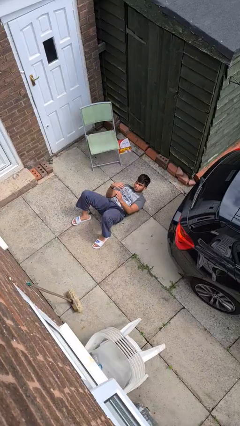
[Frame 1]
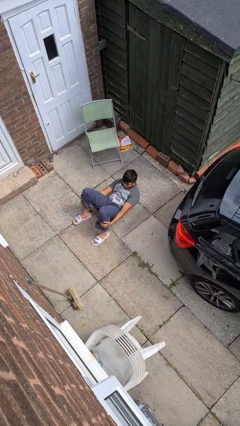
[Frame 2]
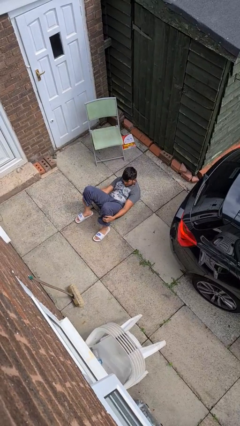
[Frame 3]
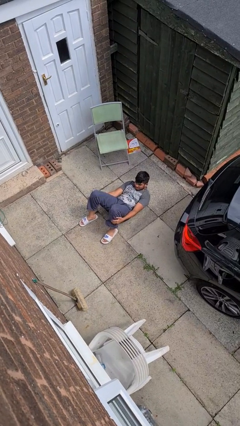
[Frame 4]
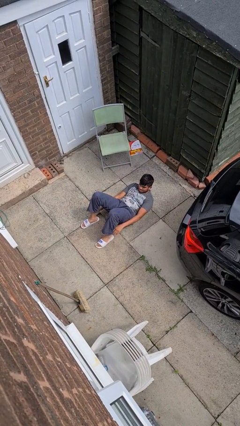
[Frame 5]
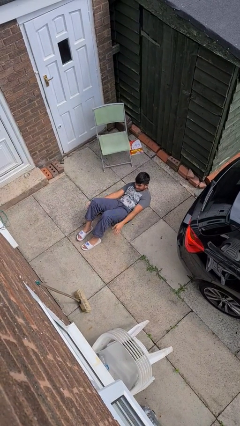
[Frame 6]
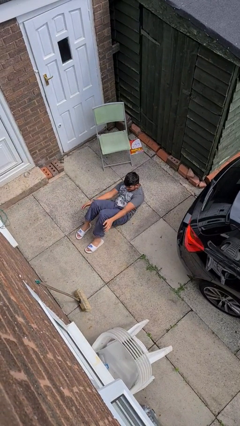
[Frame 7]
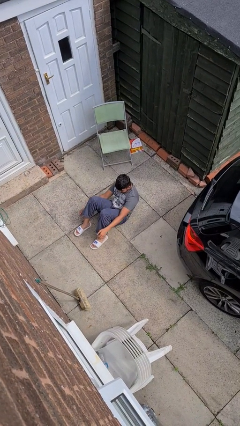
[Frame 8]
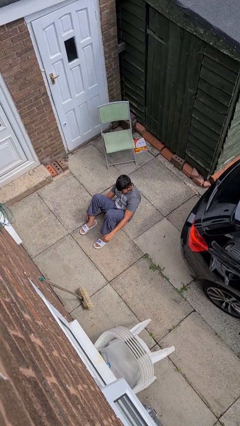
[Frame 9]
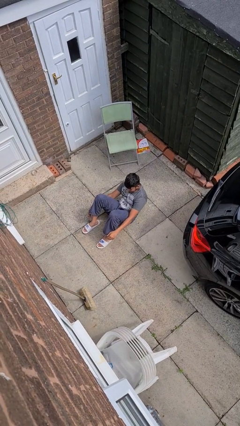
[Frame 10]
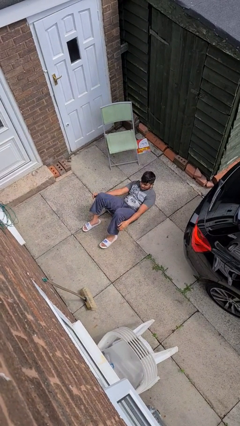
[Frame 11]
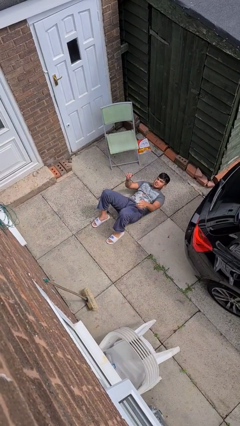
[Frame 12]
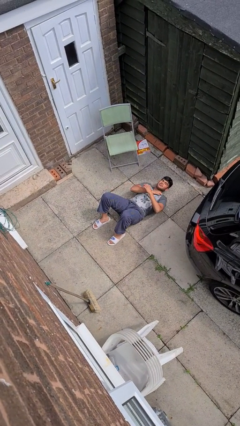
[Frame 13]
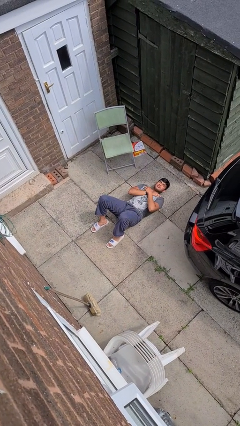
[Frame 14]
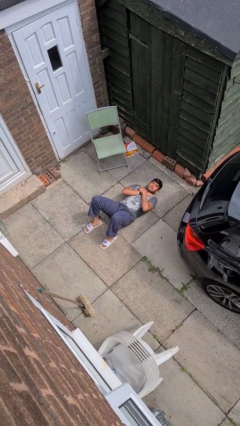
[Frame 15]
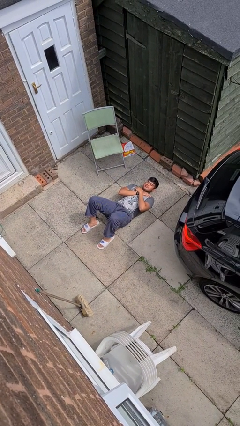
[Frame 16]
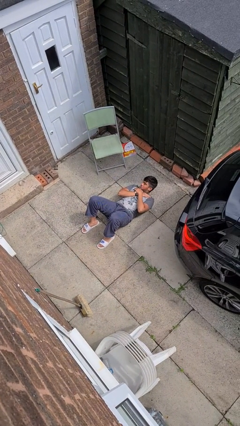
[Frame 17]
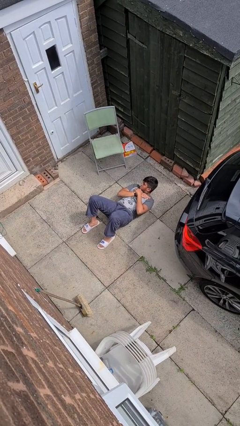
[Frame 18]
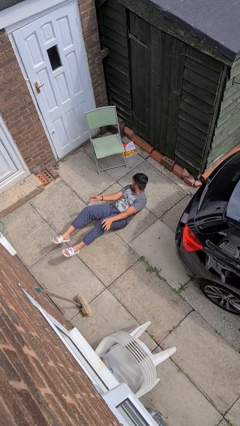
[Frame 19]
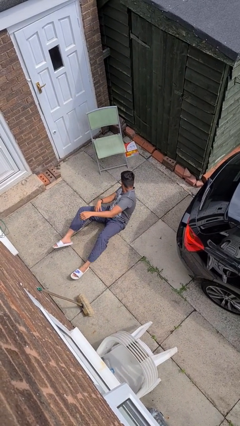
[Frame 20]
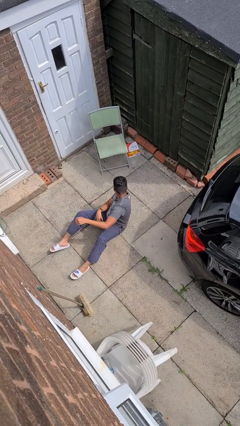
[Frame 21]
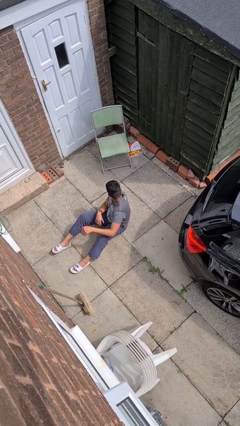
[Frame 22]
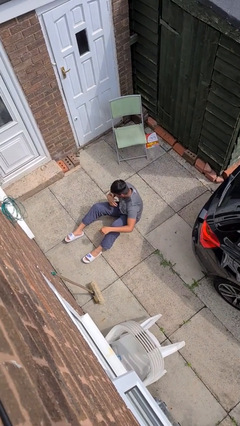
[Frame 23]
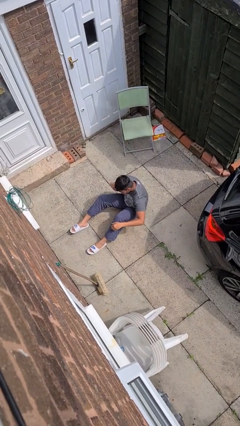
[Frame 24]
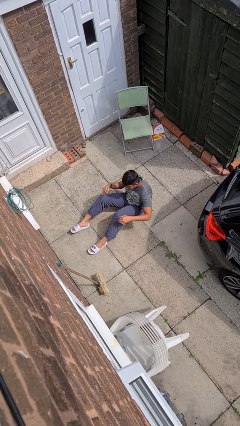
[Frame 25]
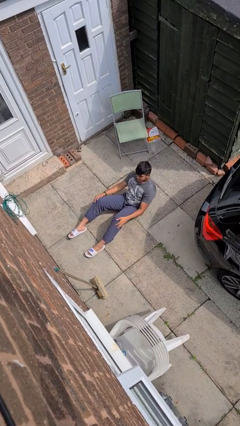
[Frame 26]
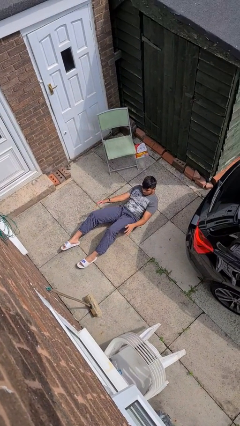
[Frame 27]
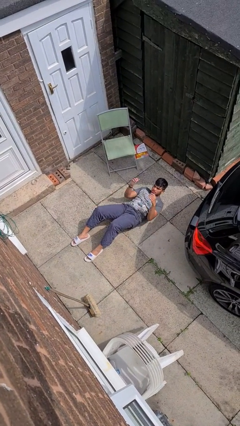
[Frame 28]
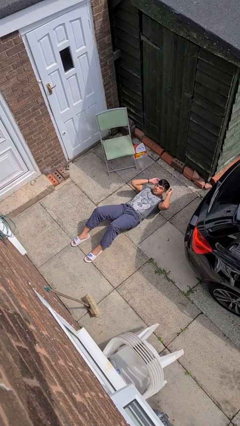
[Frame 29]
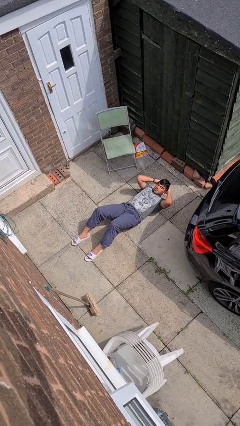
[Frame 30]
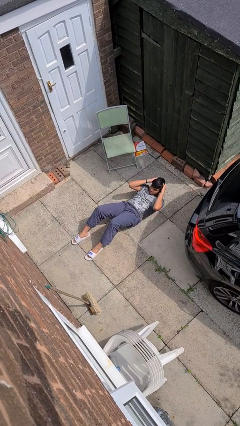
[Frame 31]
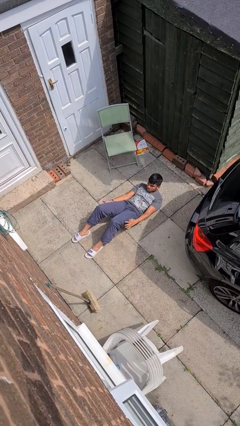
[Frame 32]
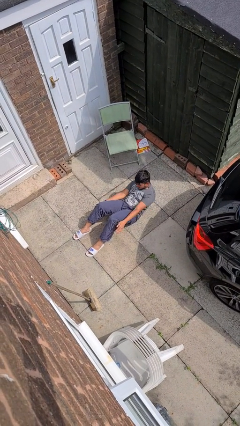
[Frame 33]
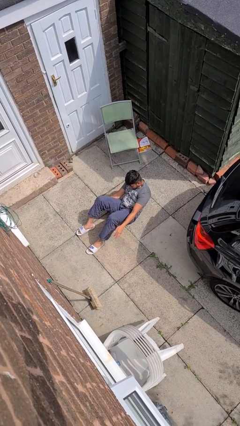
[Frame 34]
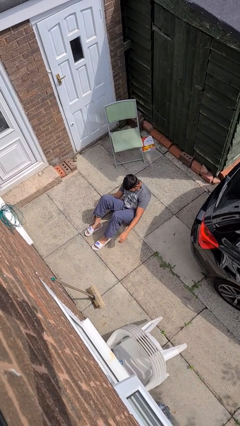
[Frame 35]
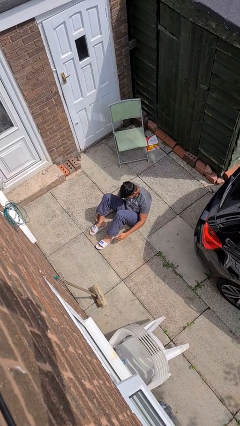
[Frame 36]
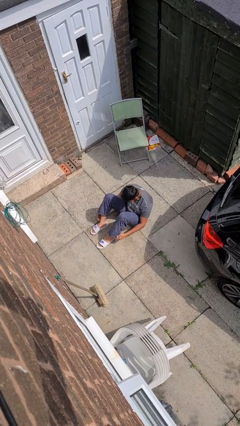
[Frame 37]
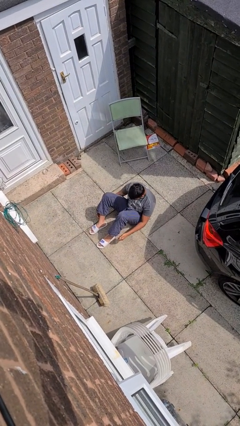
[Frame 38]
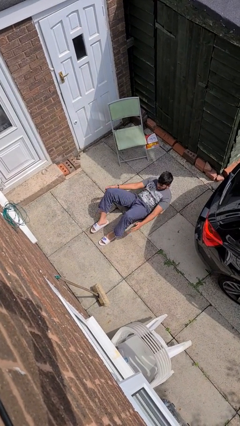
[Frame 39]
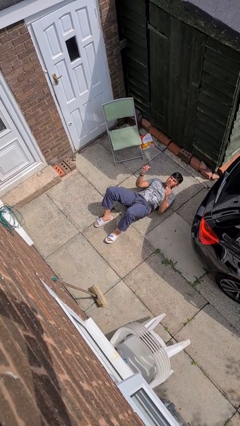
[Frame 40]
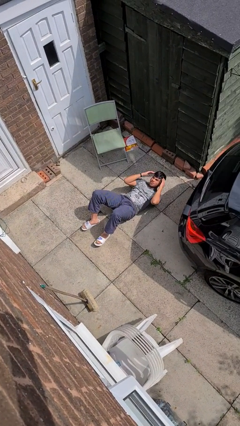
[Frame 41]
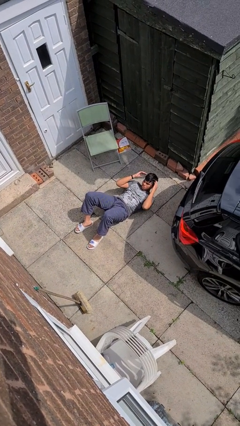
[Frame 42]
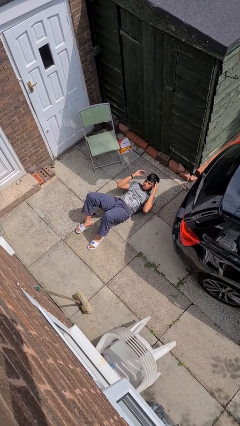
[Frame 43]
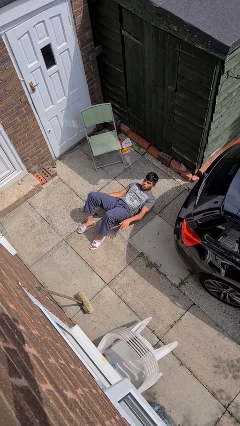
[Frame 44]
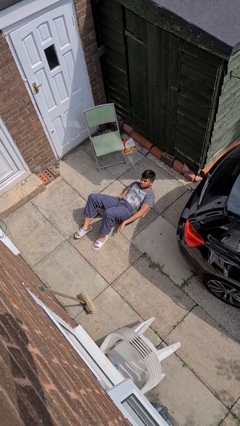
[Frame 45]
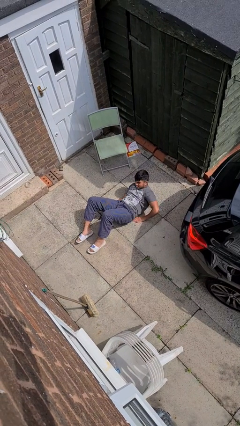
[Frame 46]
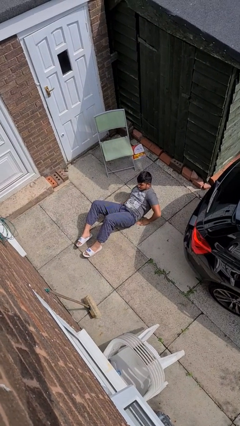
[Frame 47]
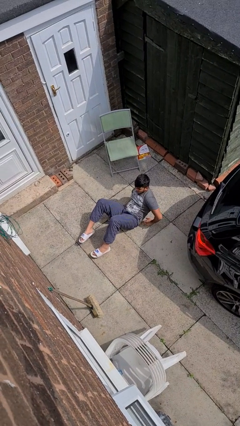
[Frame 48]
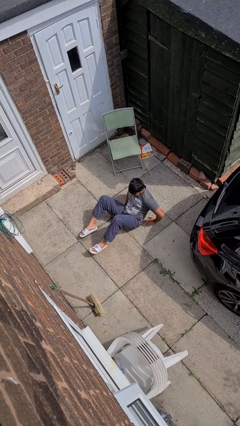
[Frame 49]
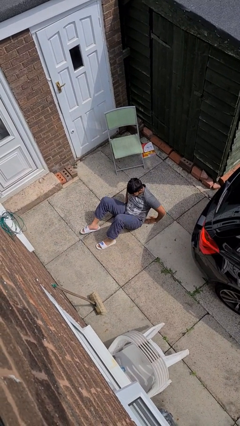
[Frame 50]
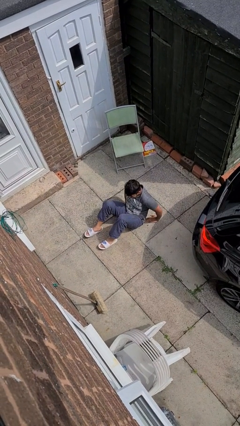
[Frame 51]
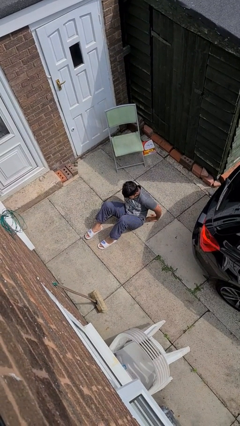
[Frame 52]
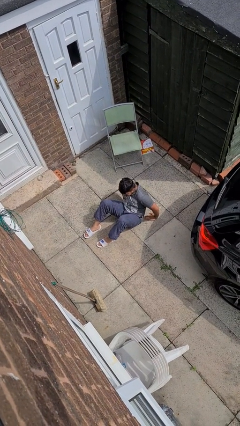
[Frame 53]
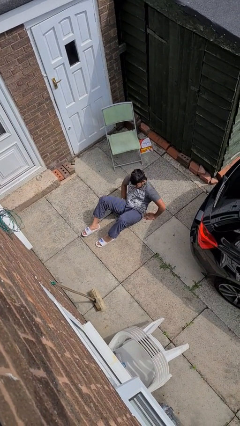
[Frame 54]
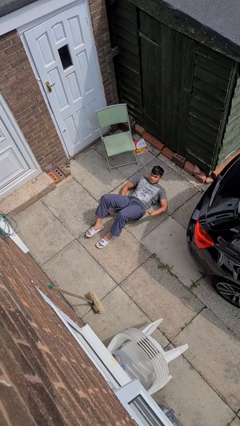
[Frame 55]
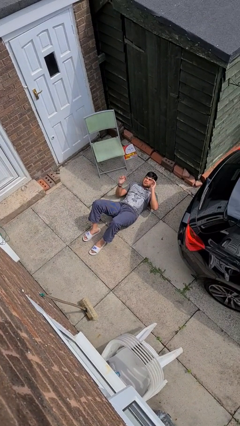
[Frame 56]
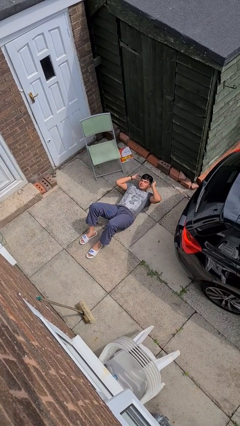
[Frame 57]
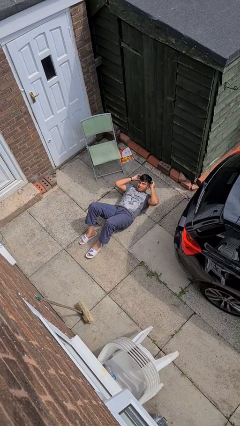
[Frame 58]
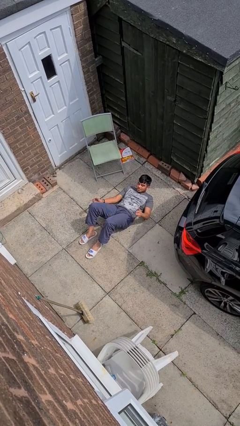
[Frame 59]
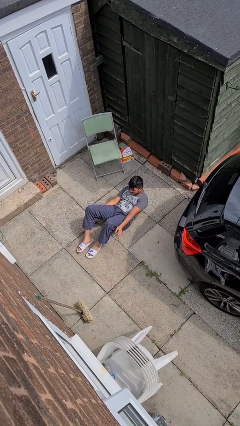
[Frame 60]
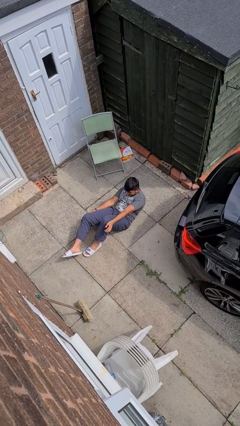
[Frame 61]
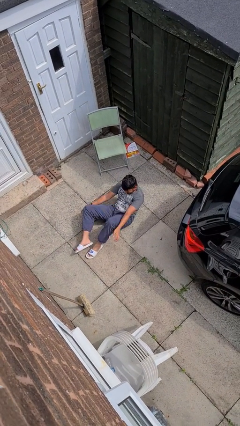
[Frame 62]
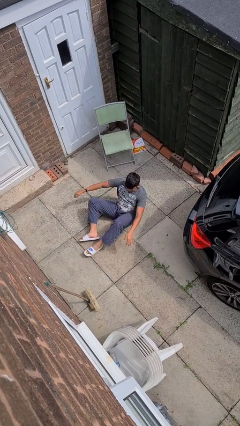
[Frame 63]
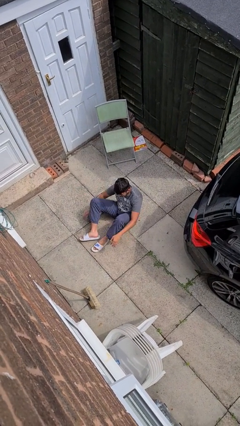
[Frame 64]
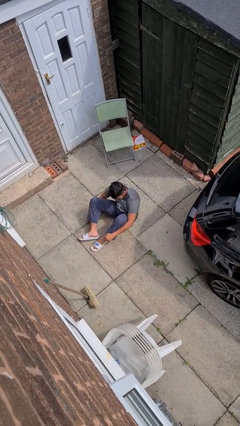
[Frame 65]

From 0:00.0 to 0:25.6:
person exercises with situp

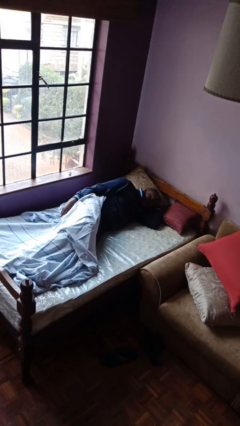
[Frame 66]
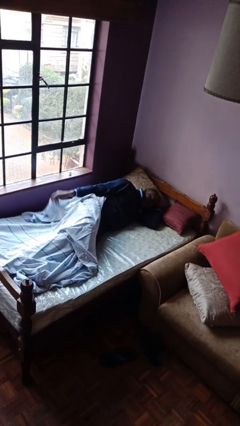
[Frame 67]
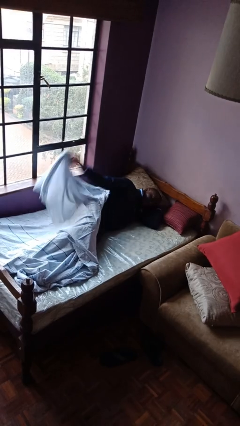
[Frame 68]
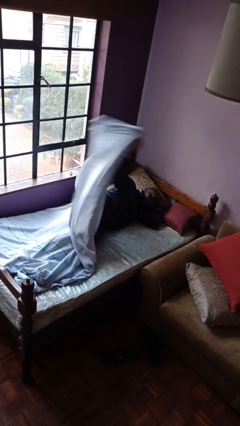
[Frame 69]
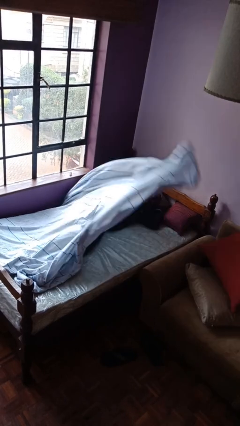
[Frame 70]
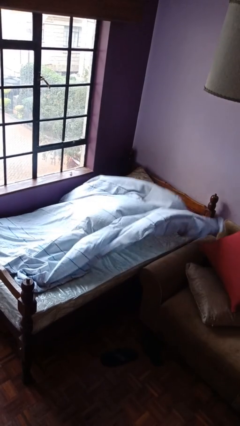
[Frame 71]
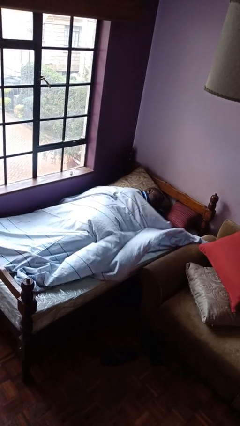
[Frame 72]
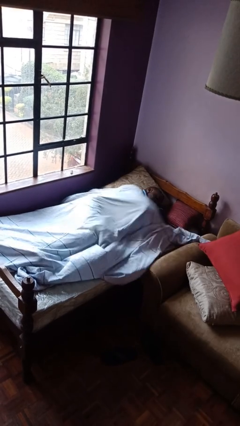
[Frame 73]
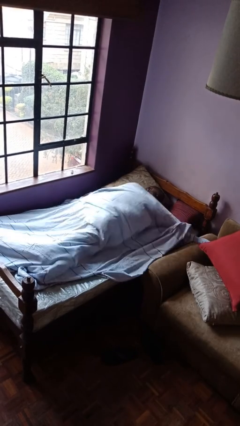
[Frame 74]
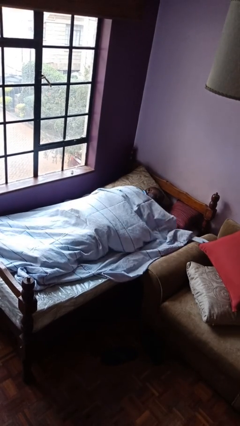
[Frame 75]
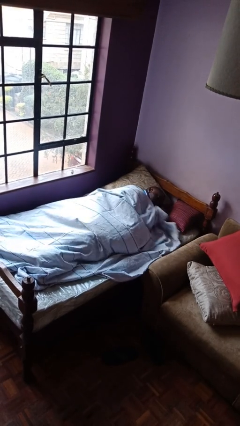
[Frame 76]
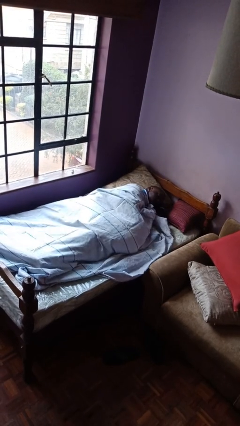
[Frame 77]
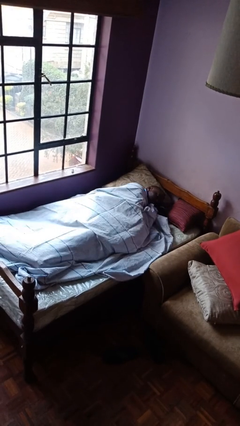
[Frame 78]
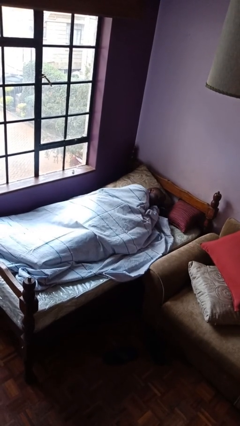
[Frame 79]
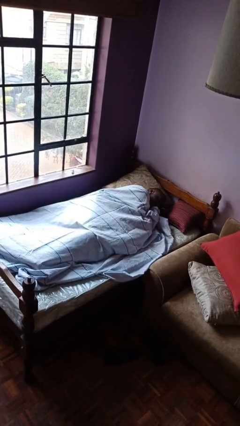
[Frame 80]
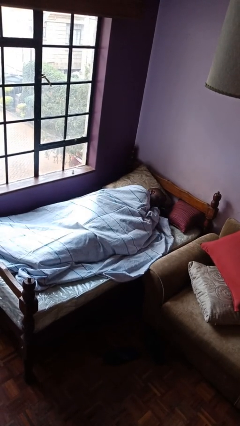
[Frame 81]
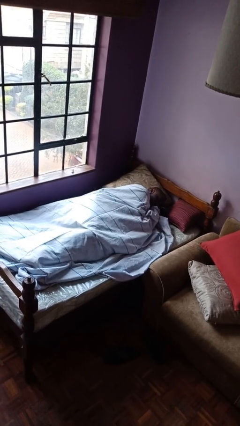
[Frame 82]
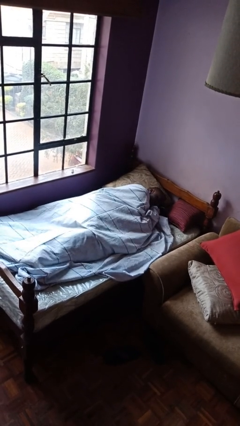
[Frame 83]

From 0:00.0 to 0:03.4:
person covers with bedsheets

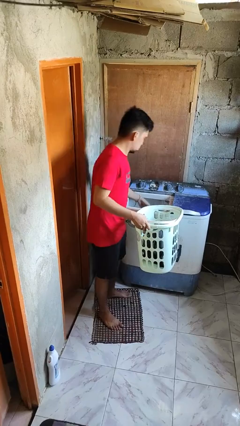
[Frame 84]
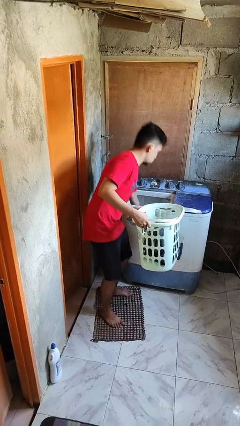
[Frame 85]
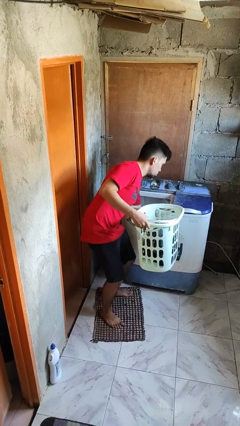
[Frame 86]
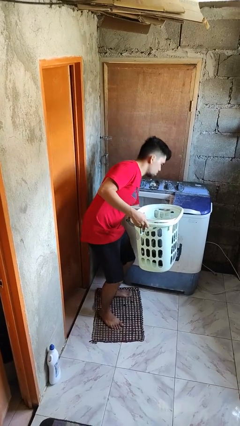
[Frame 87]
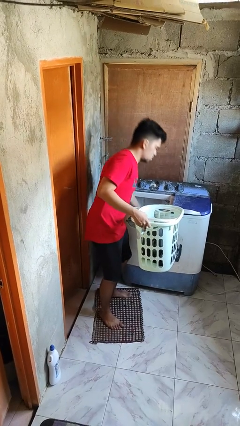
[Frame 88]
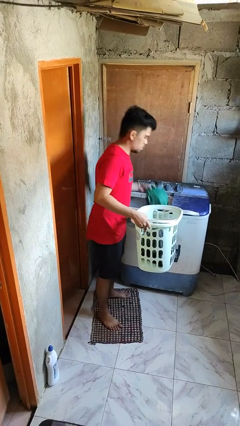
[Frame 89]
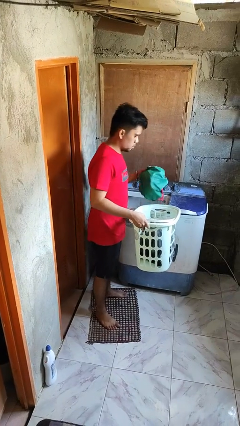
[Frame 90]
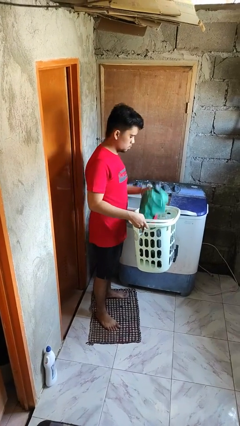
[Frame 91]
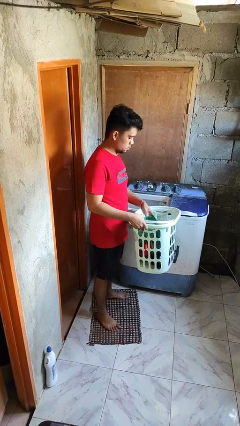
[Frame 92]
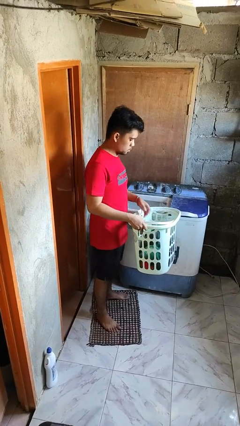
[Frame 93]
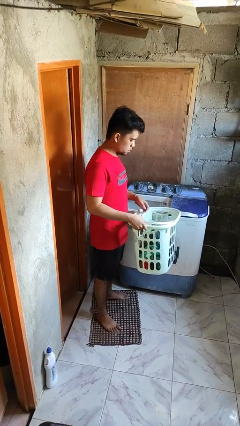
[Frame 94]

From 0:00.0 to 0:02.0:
person loads clotheswasher

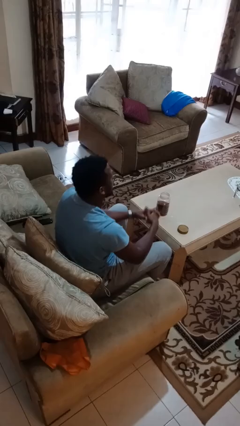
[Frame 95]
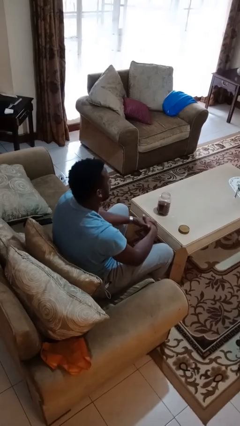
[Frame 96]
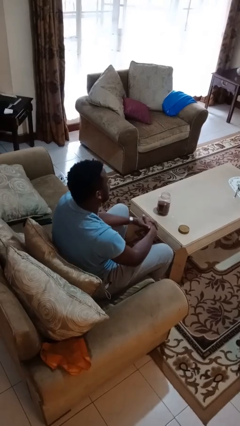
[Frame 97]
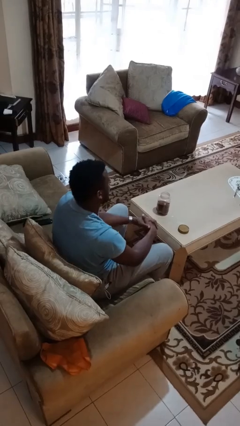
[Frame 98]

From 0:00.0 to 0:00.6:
person closes jar
